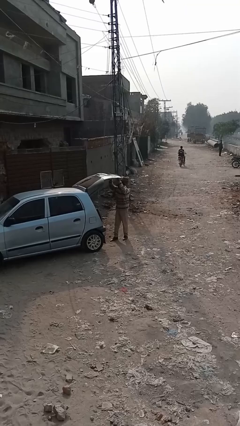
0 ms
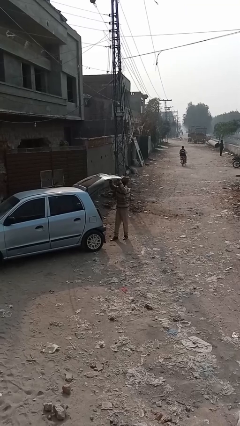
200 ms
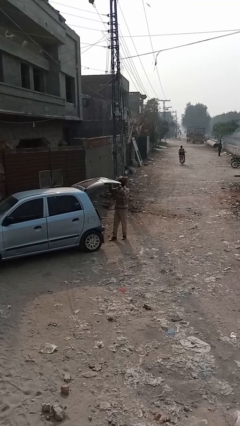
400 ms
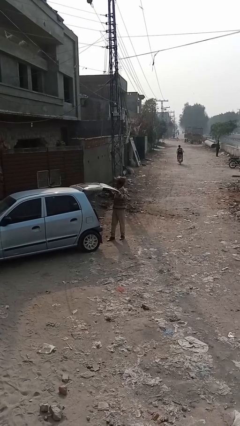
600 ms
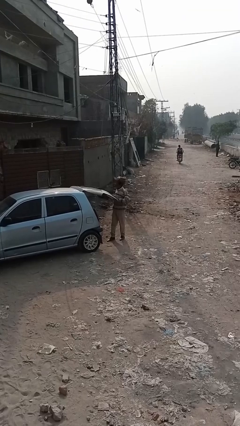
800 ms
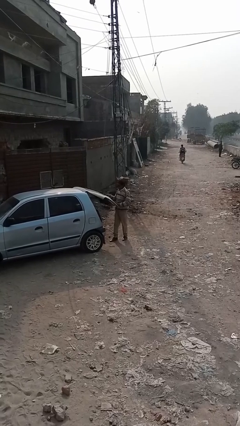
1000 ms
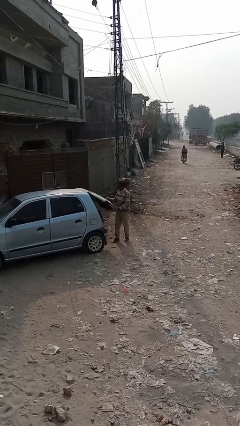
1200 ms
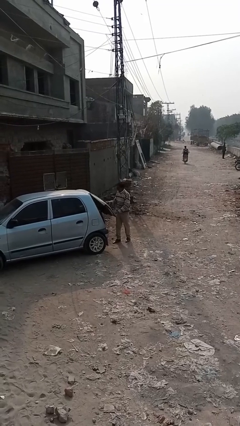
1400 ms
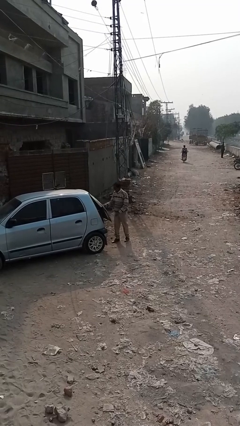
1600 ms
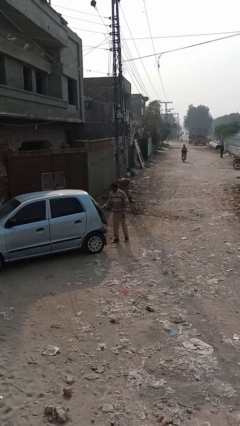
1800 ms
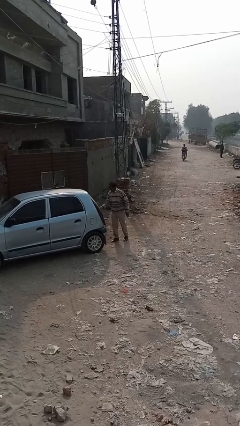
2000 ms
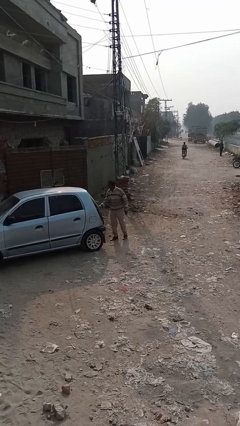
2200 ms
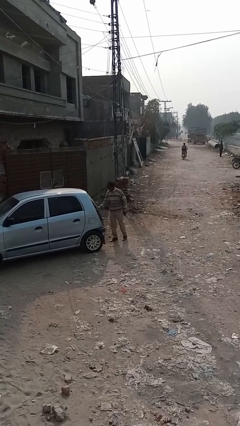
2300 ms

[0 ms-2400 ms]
person closes car trunk

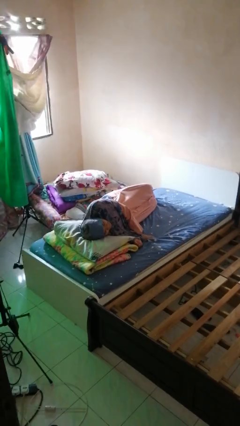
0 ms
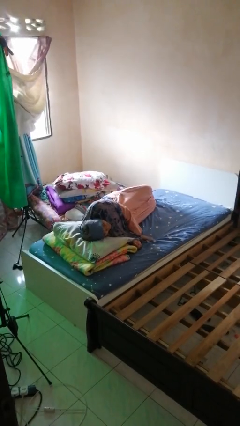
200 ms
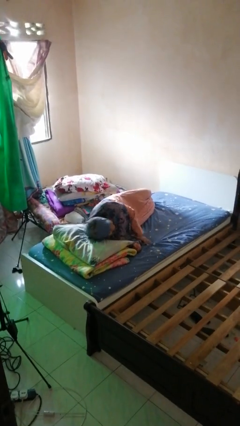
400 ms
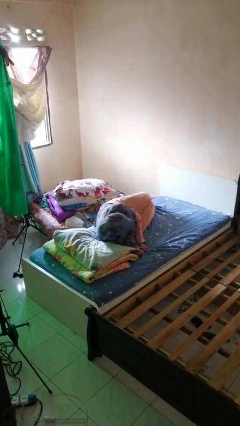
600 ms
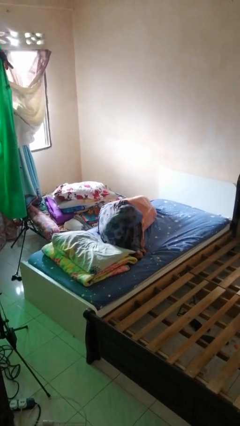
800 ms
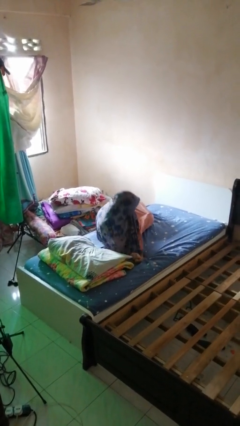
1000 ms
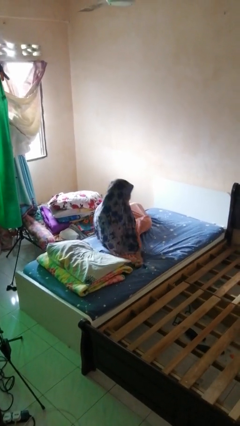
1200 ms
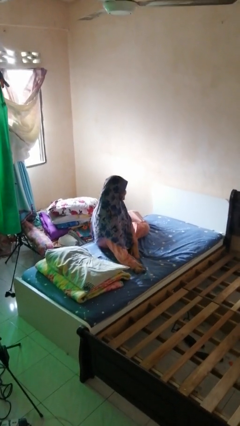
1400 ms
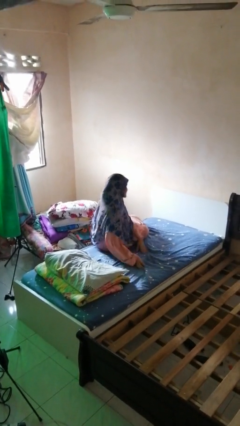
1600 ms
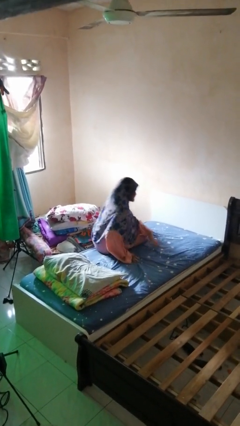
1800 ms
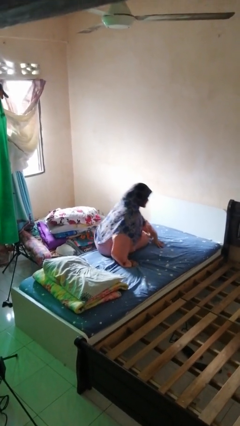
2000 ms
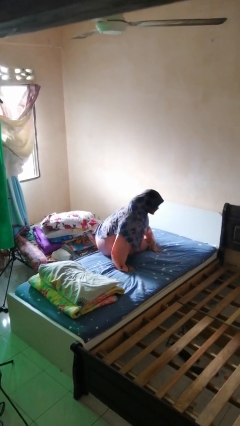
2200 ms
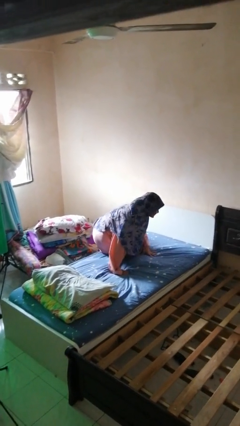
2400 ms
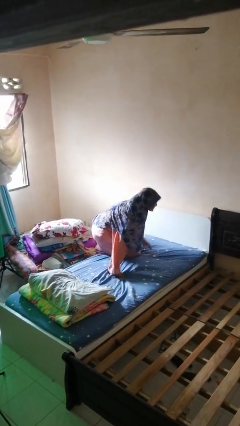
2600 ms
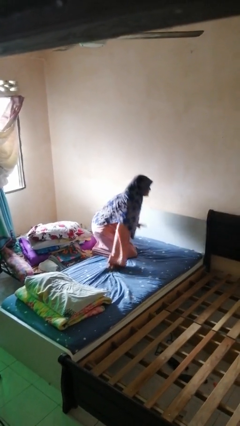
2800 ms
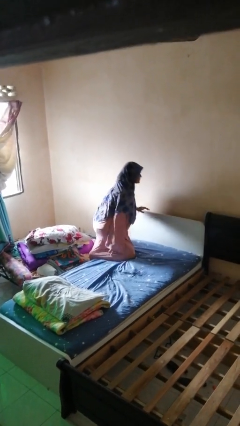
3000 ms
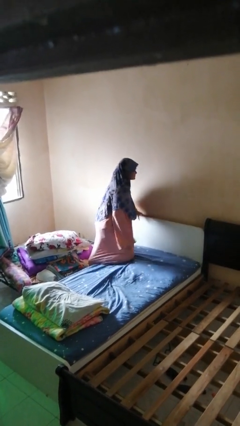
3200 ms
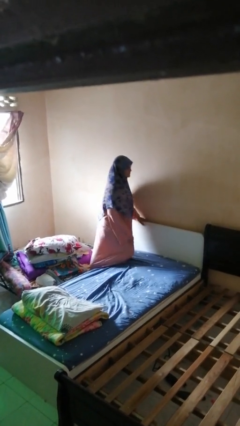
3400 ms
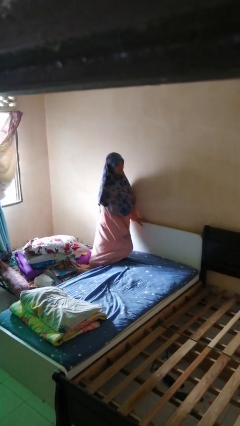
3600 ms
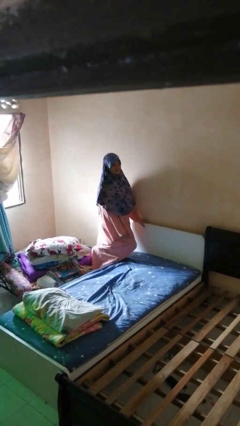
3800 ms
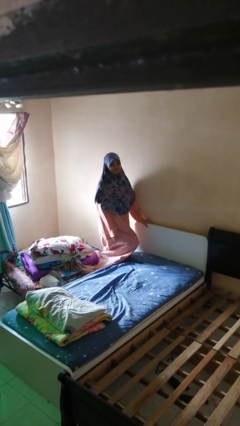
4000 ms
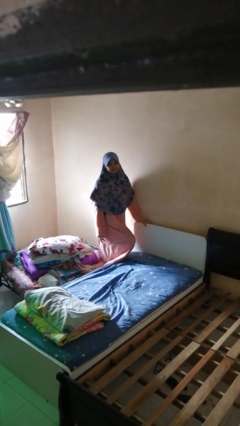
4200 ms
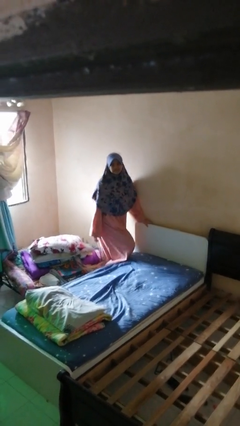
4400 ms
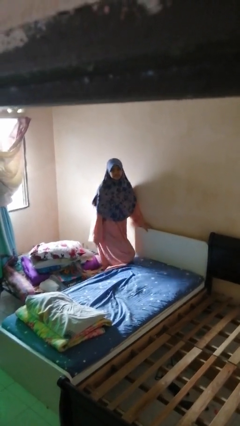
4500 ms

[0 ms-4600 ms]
person stands up

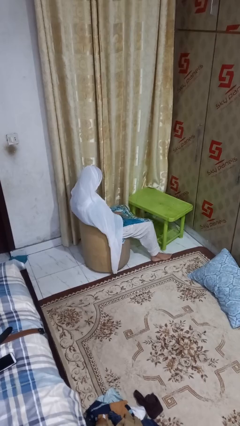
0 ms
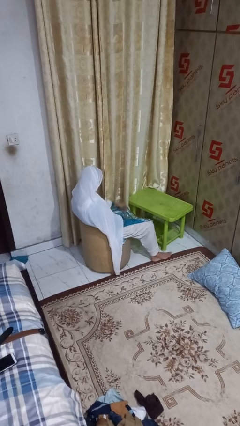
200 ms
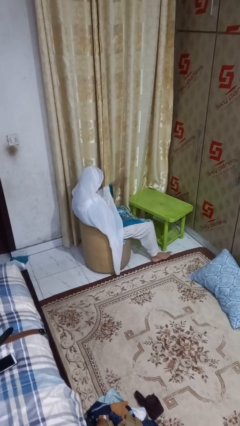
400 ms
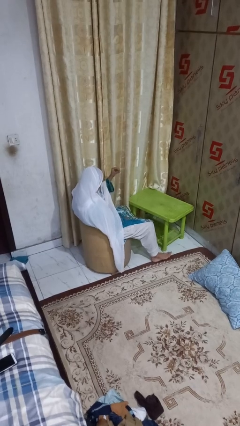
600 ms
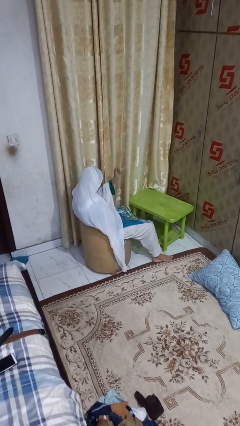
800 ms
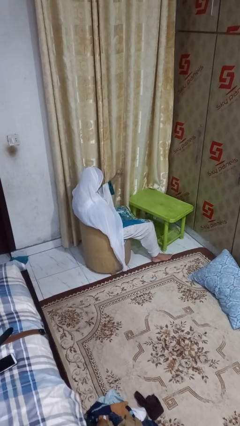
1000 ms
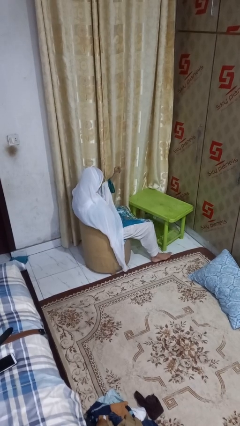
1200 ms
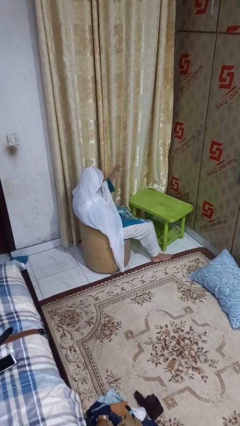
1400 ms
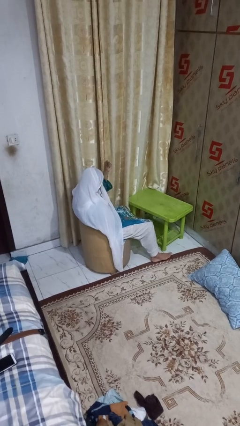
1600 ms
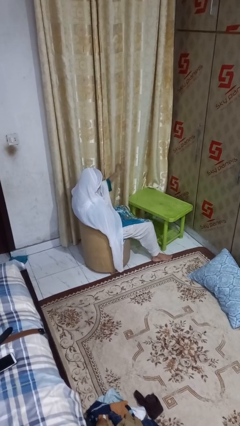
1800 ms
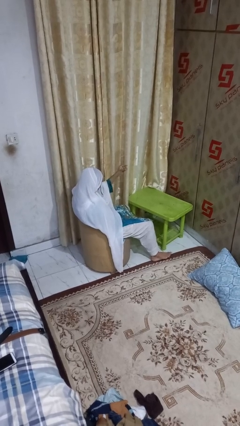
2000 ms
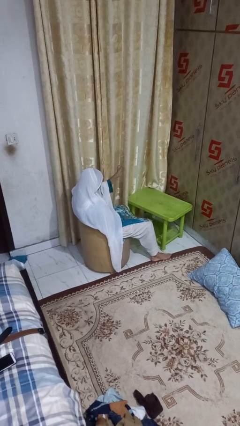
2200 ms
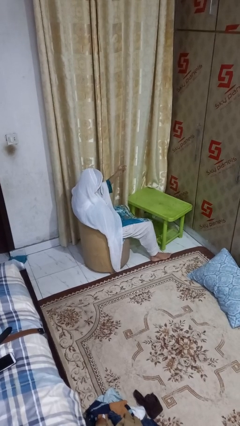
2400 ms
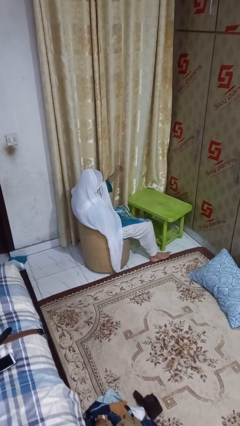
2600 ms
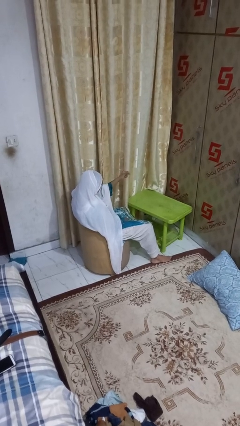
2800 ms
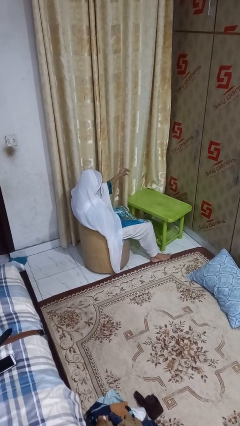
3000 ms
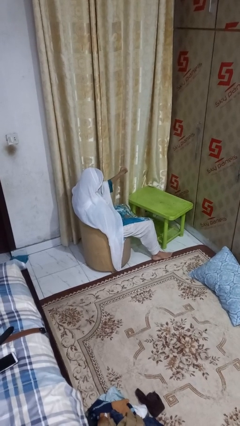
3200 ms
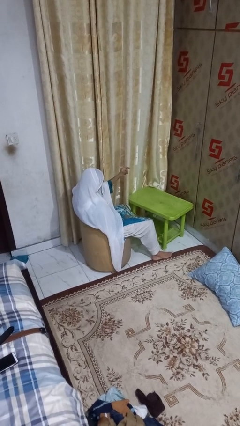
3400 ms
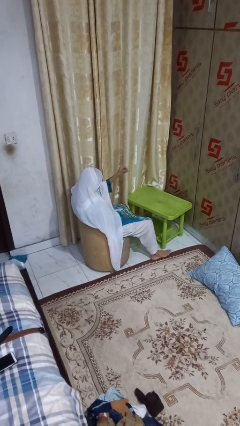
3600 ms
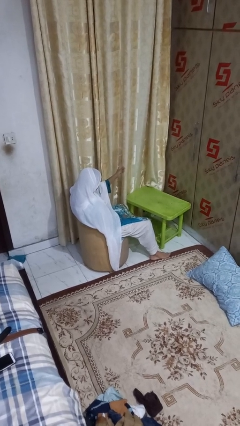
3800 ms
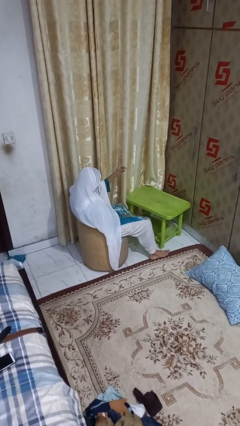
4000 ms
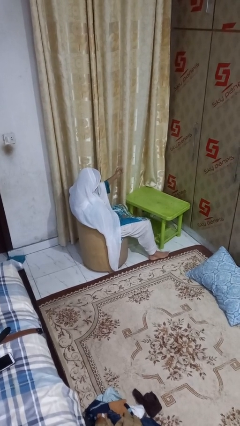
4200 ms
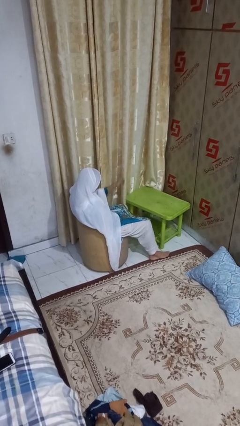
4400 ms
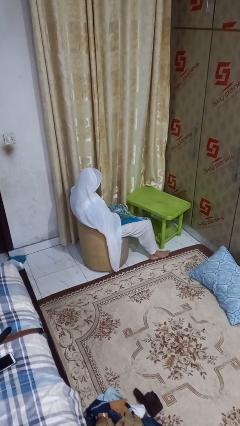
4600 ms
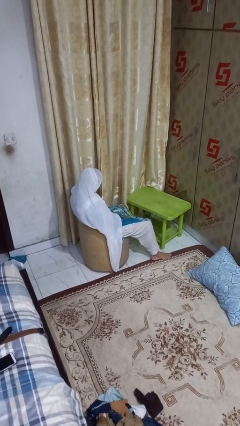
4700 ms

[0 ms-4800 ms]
person snaps fingers

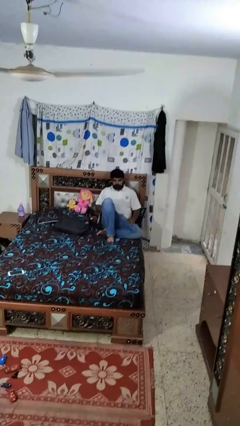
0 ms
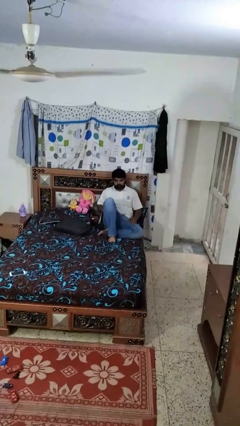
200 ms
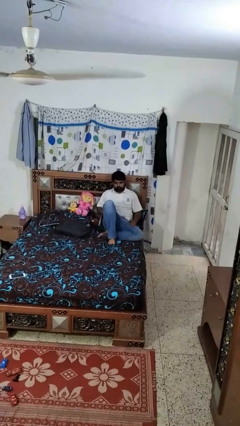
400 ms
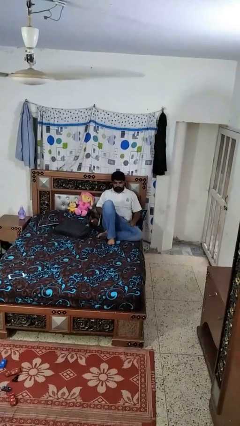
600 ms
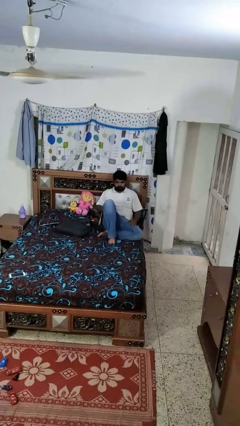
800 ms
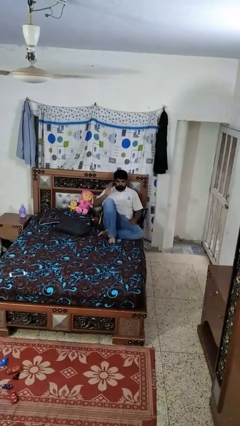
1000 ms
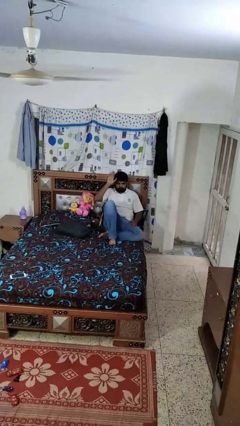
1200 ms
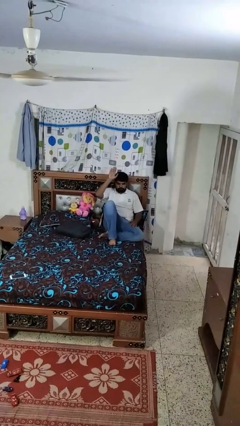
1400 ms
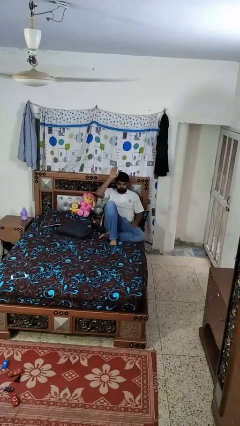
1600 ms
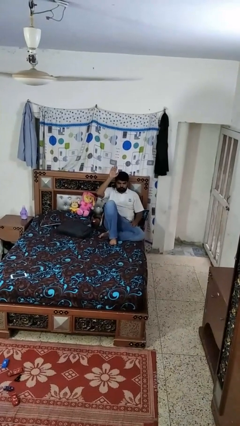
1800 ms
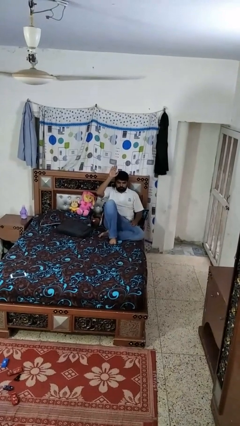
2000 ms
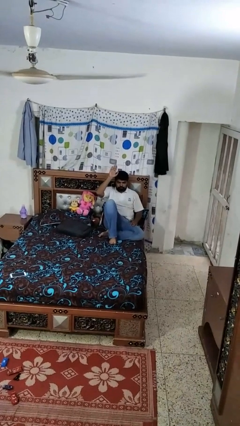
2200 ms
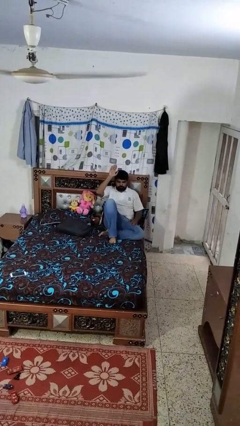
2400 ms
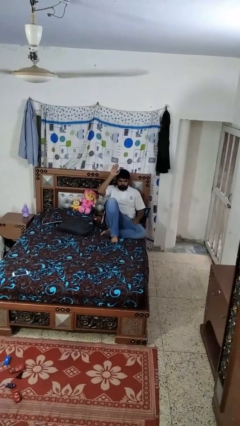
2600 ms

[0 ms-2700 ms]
person gestures raise hand

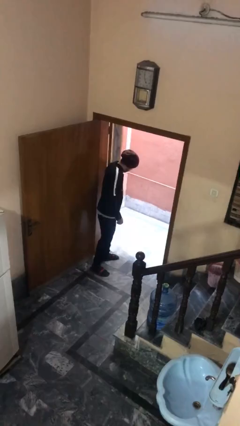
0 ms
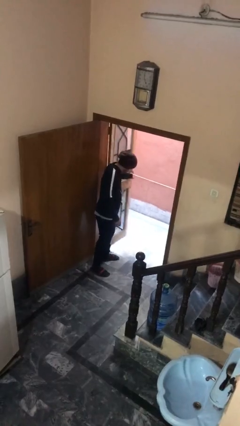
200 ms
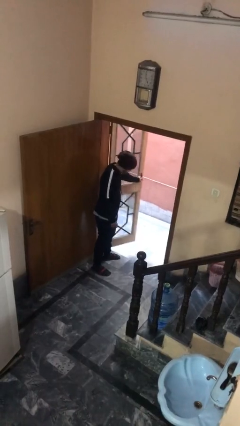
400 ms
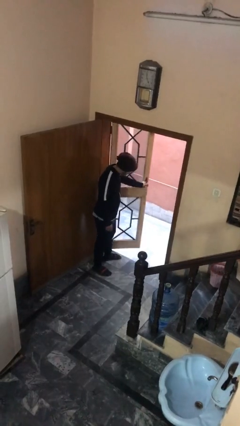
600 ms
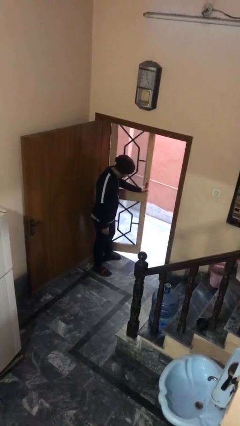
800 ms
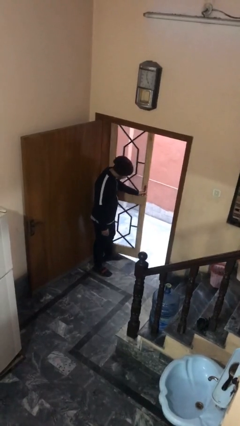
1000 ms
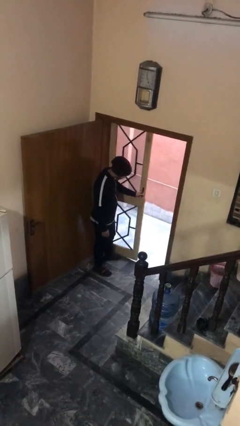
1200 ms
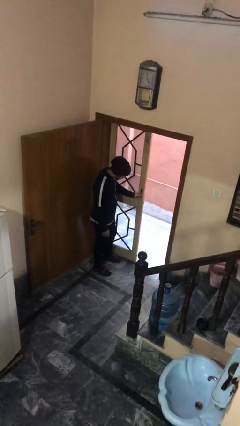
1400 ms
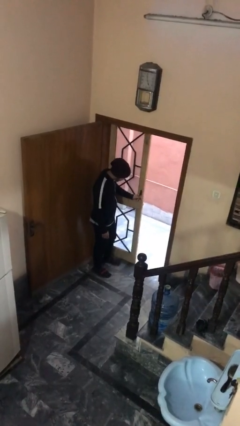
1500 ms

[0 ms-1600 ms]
person closes facility door

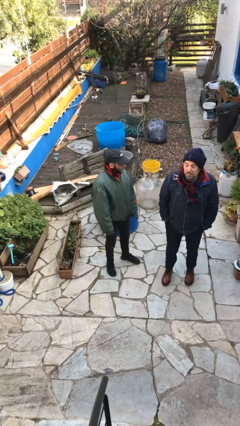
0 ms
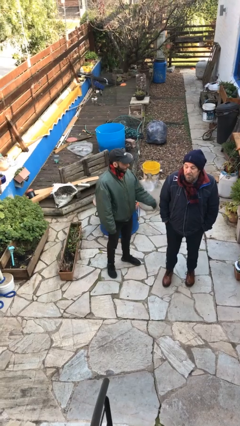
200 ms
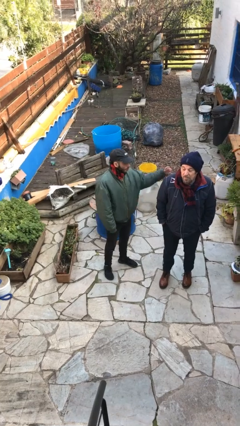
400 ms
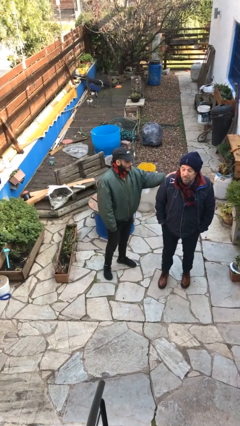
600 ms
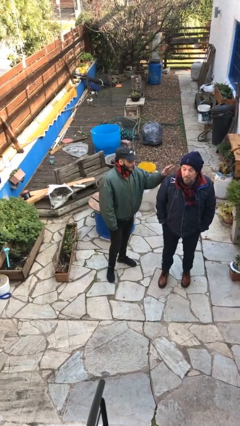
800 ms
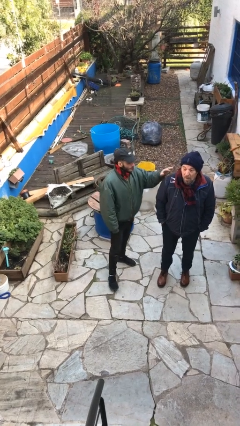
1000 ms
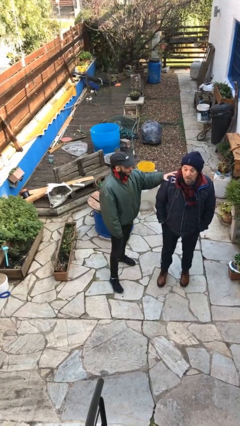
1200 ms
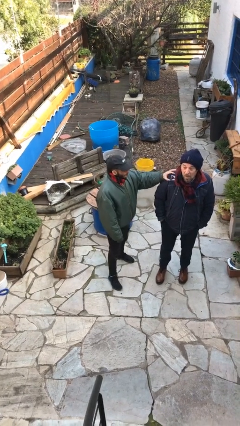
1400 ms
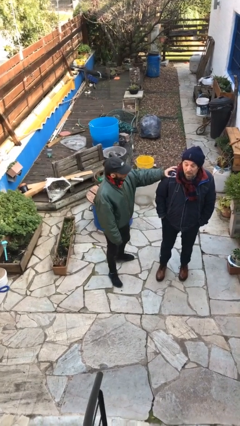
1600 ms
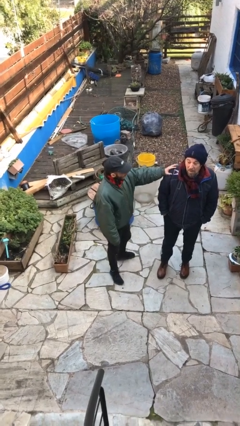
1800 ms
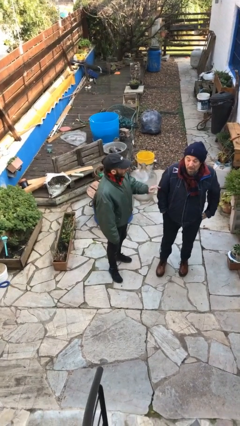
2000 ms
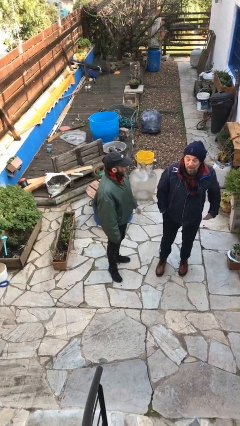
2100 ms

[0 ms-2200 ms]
person pounds shoulders of person
